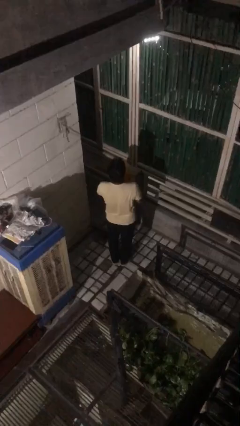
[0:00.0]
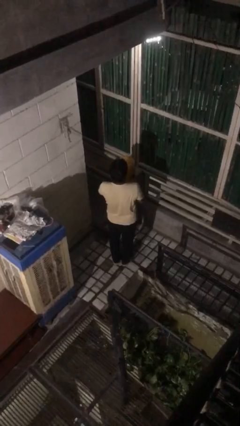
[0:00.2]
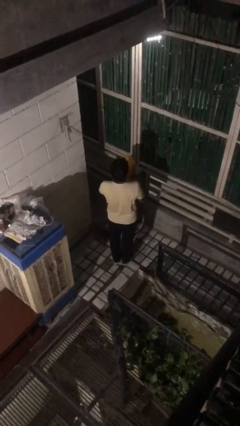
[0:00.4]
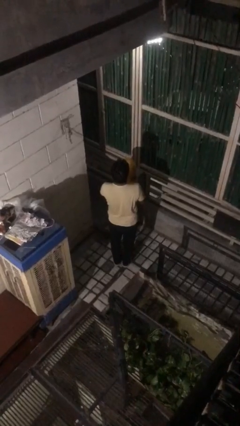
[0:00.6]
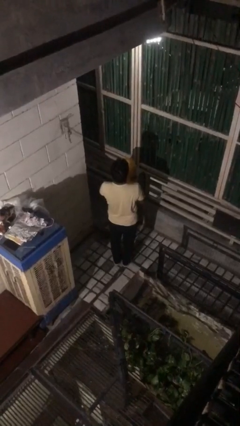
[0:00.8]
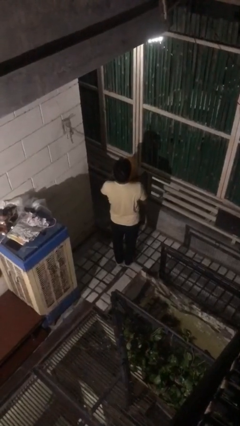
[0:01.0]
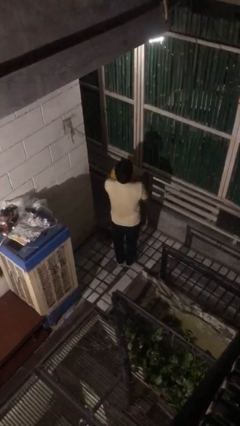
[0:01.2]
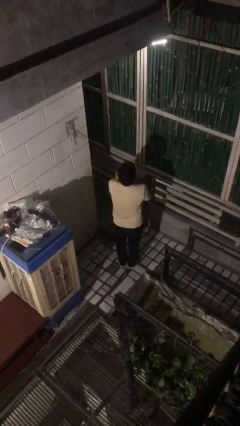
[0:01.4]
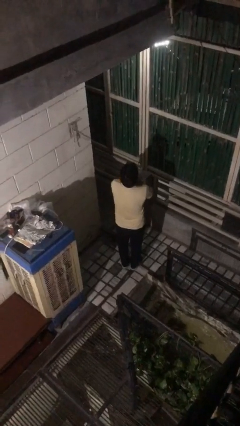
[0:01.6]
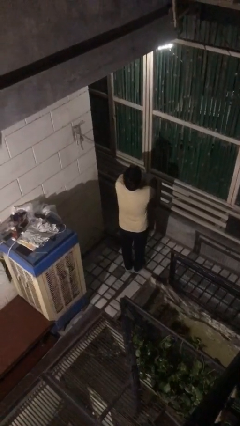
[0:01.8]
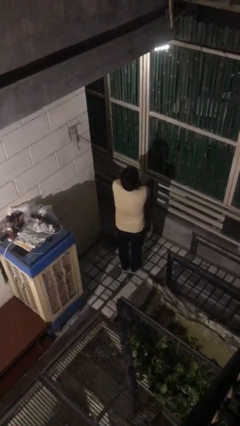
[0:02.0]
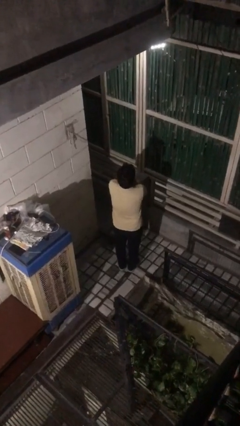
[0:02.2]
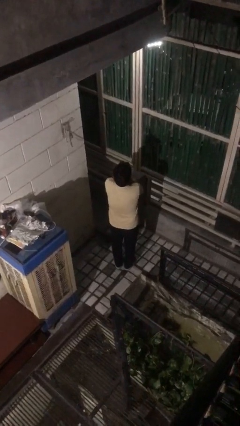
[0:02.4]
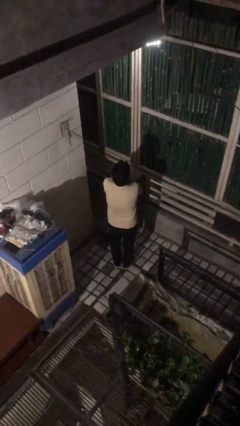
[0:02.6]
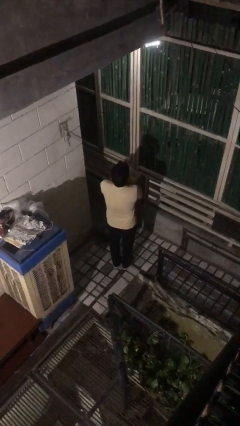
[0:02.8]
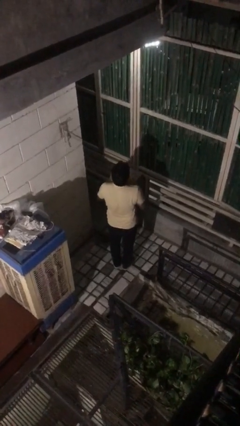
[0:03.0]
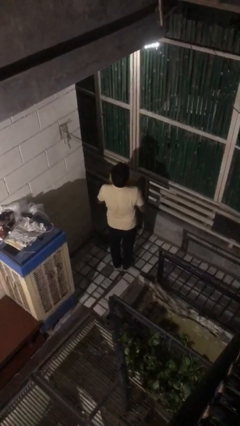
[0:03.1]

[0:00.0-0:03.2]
person hugs stuffed animal

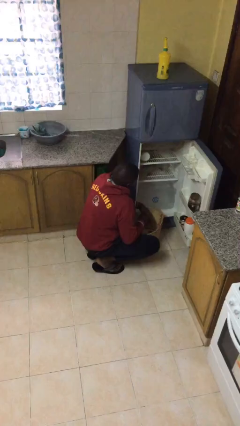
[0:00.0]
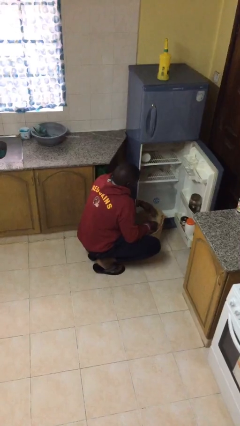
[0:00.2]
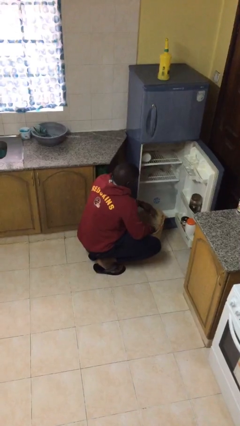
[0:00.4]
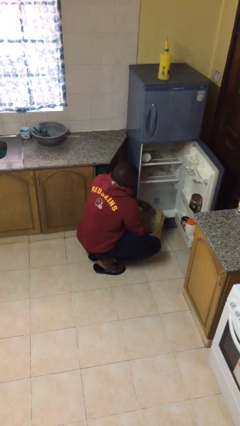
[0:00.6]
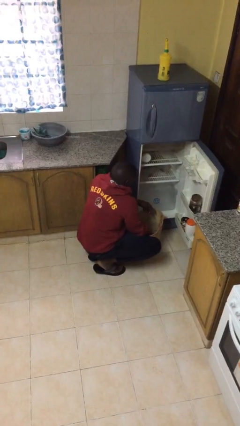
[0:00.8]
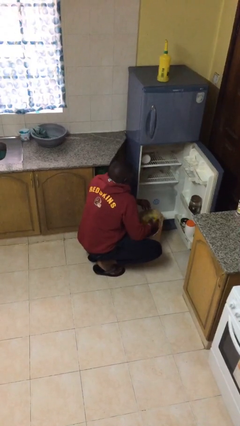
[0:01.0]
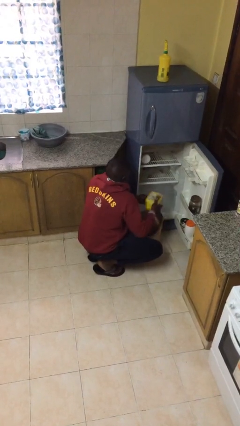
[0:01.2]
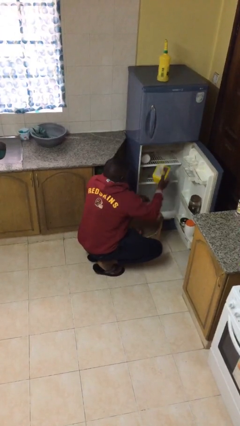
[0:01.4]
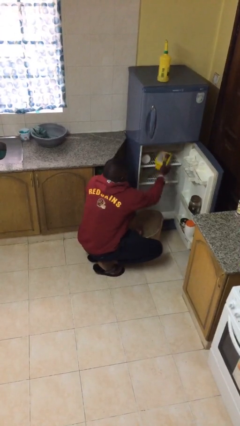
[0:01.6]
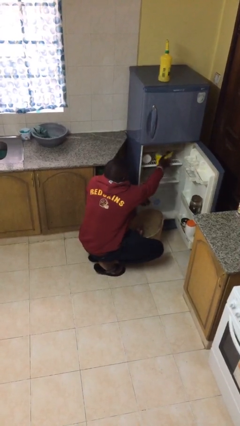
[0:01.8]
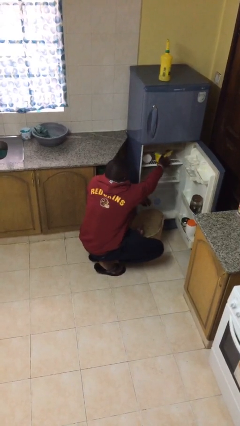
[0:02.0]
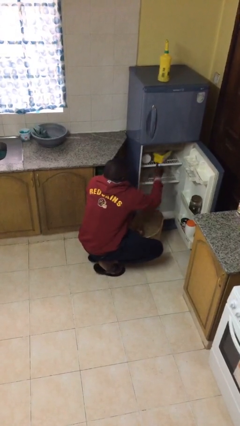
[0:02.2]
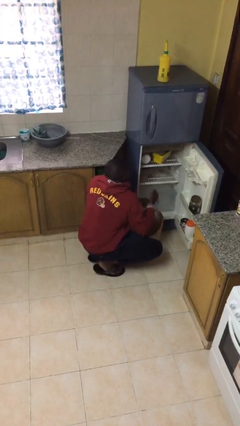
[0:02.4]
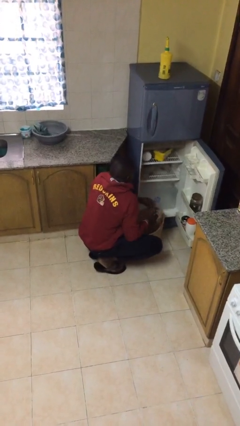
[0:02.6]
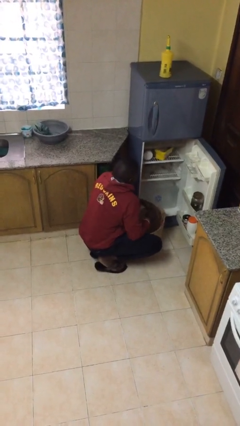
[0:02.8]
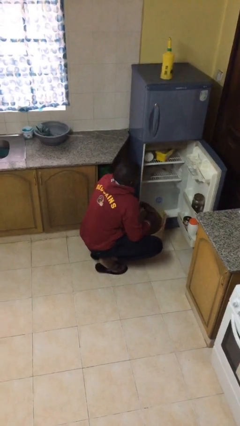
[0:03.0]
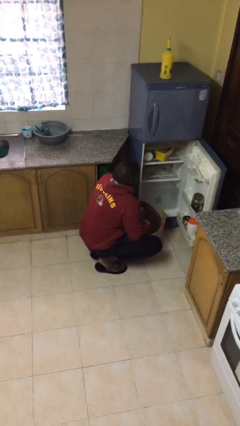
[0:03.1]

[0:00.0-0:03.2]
person loads groceries into refrigerator

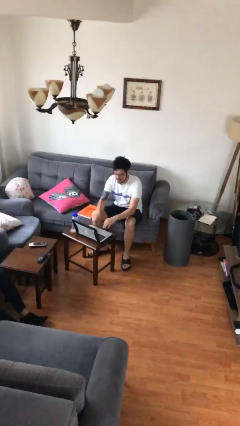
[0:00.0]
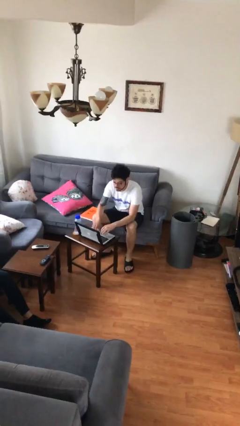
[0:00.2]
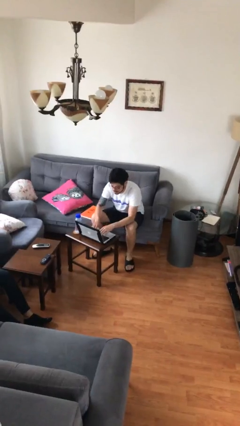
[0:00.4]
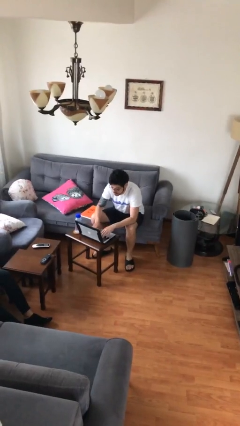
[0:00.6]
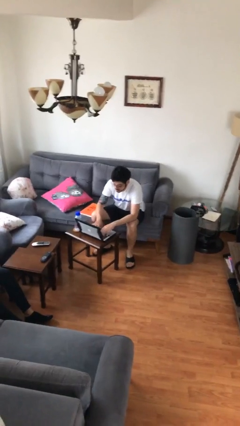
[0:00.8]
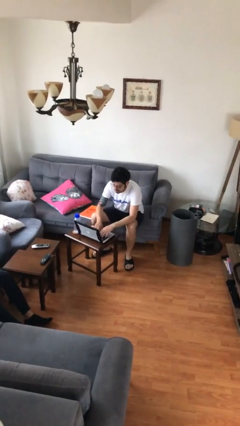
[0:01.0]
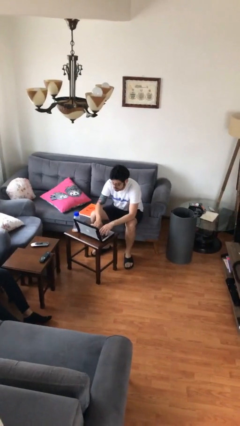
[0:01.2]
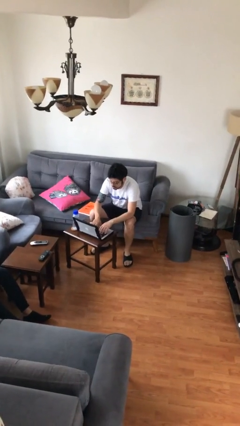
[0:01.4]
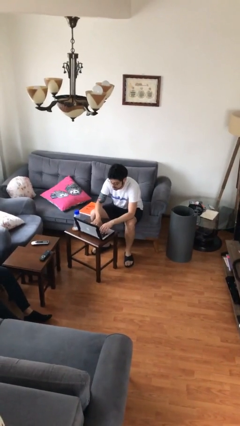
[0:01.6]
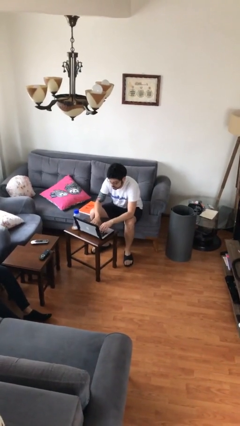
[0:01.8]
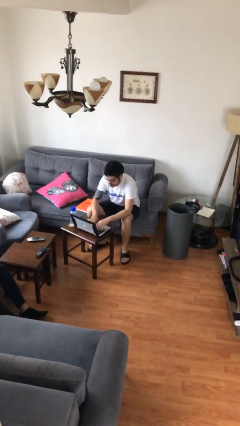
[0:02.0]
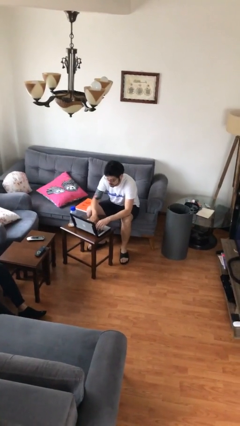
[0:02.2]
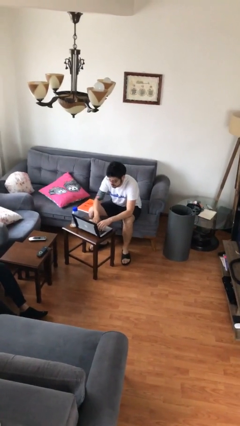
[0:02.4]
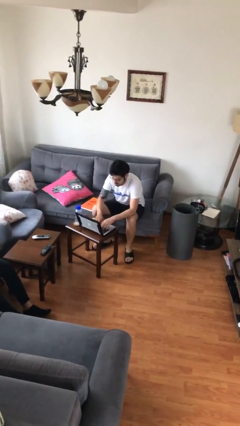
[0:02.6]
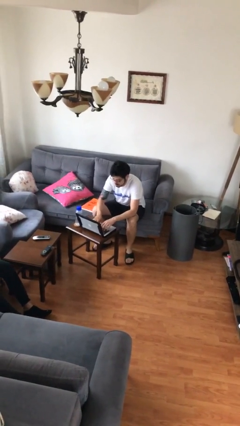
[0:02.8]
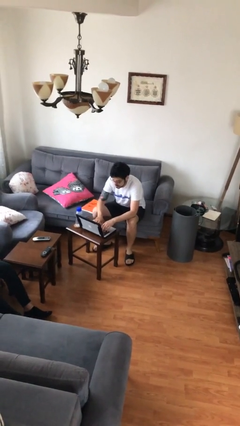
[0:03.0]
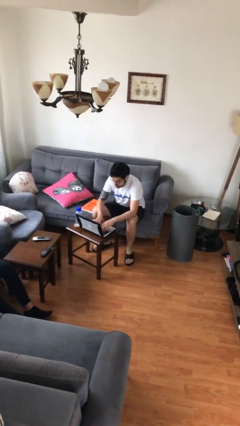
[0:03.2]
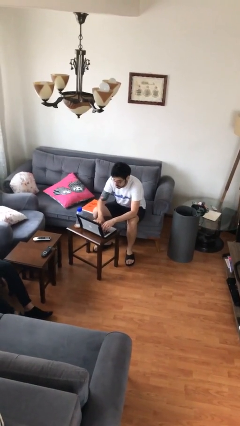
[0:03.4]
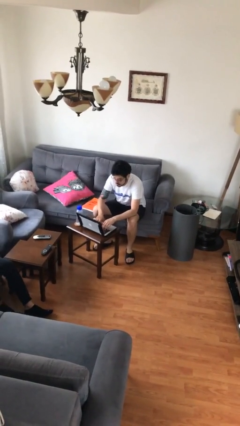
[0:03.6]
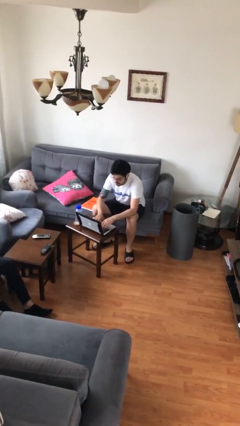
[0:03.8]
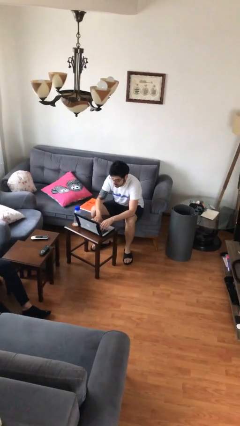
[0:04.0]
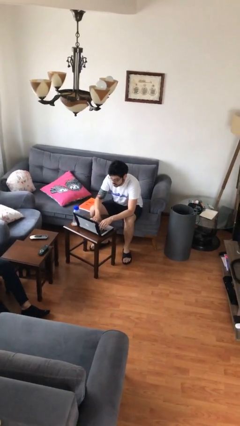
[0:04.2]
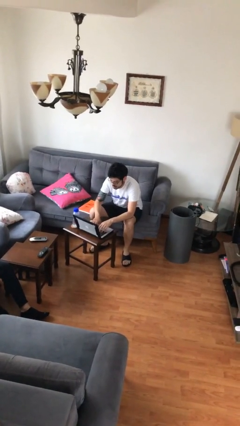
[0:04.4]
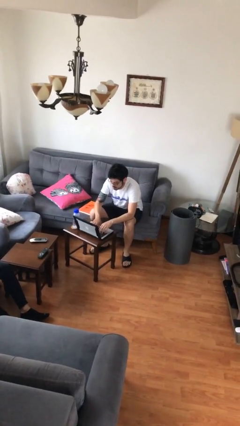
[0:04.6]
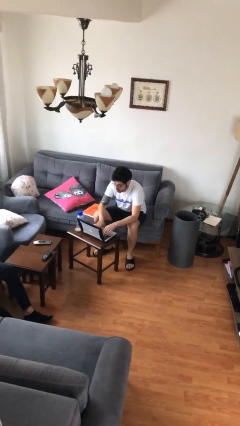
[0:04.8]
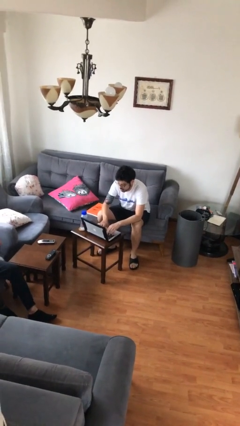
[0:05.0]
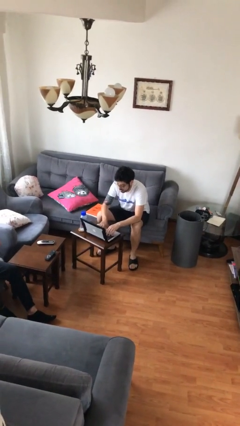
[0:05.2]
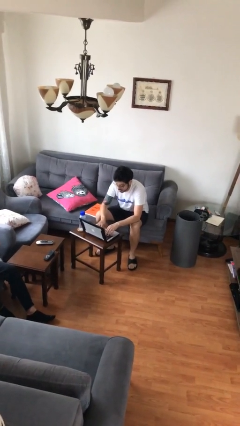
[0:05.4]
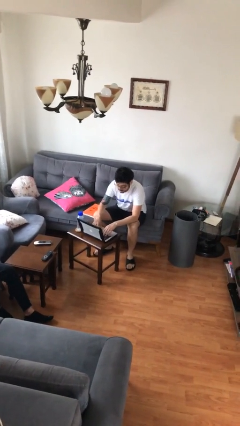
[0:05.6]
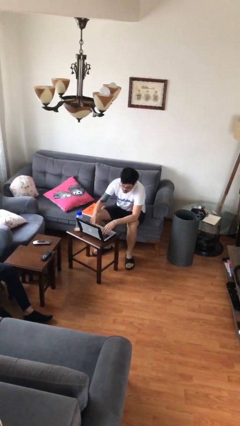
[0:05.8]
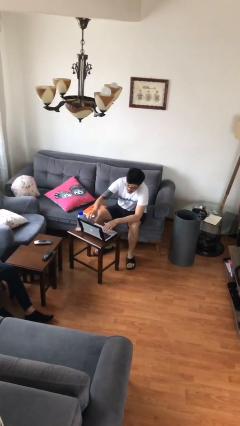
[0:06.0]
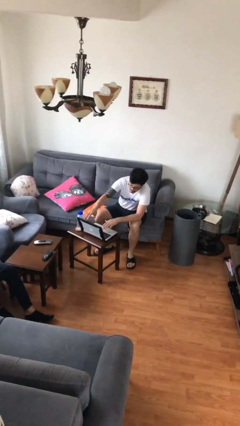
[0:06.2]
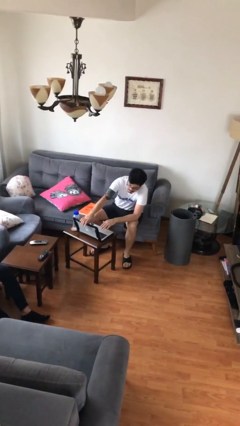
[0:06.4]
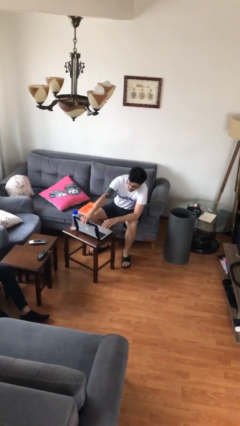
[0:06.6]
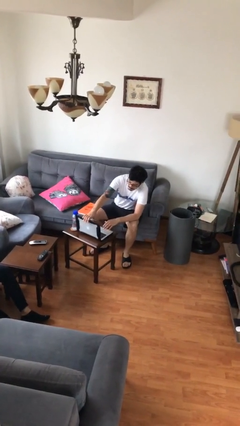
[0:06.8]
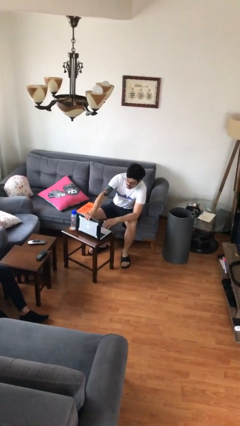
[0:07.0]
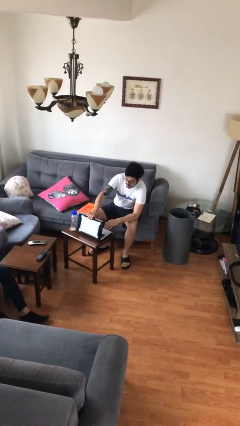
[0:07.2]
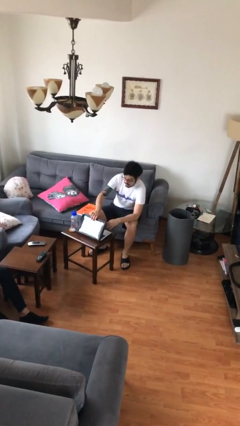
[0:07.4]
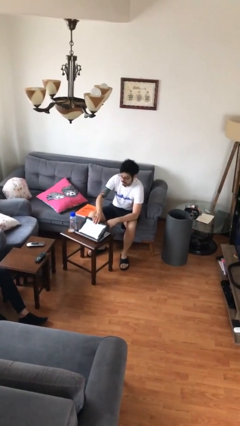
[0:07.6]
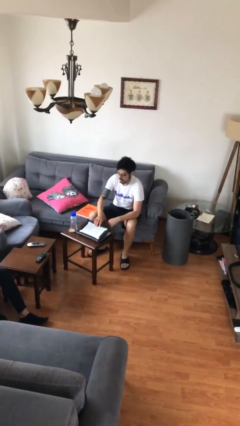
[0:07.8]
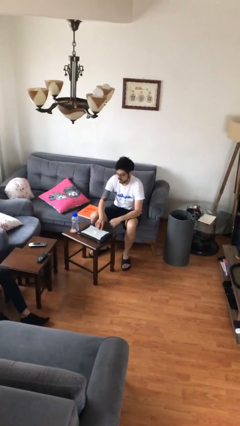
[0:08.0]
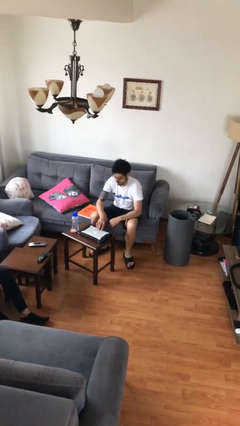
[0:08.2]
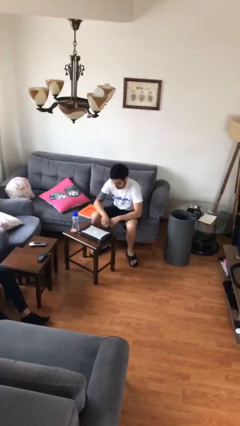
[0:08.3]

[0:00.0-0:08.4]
person interacts with laptop

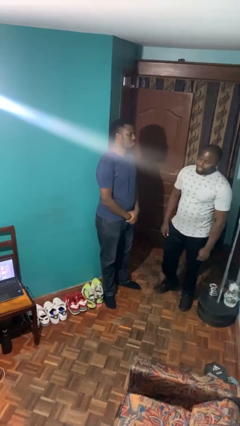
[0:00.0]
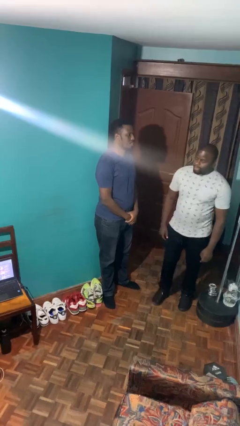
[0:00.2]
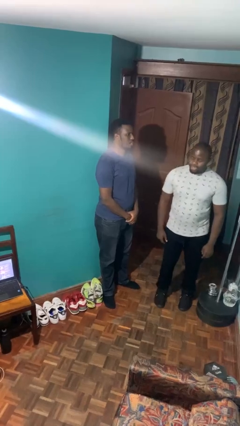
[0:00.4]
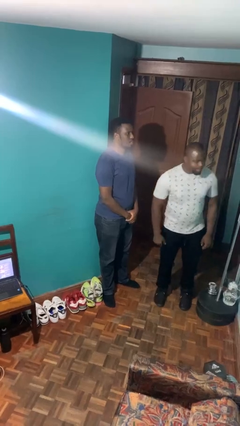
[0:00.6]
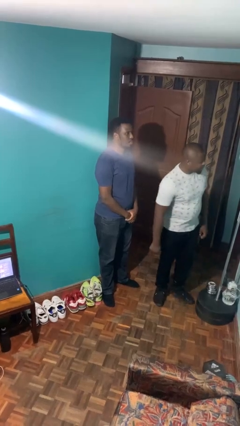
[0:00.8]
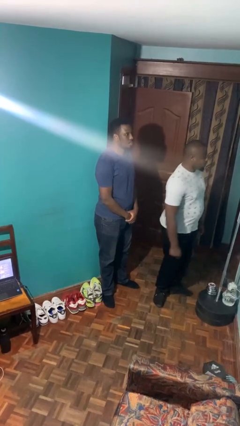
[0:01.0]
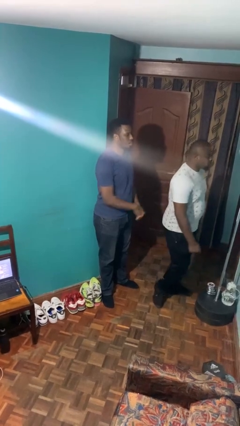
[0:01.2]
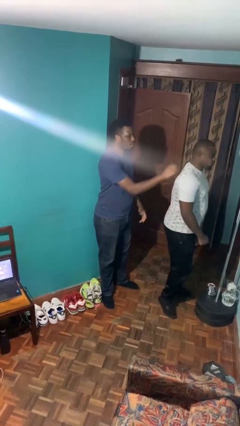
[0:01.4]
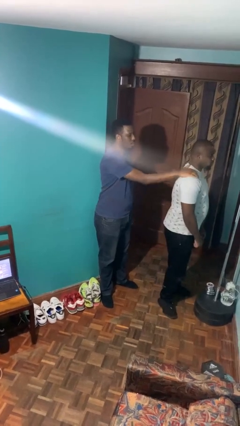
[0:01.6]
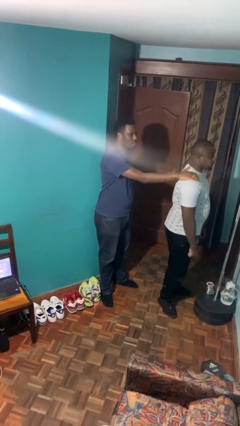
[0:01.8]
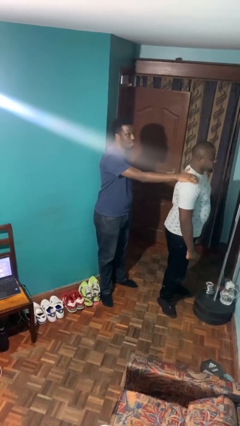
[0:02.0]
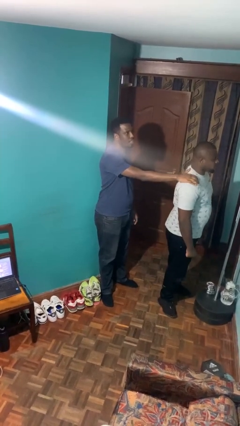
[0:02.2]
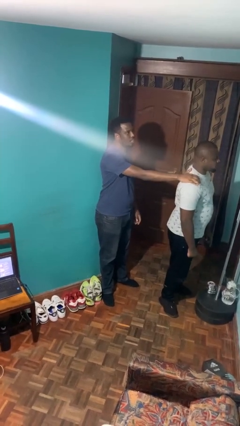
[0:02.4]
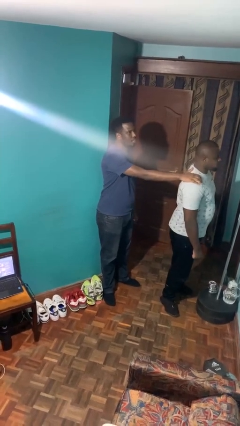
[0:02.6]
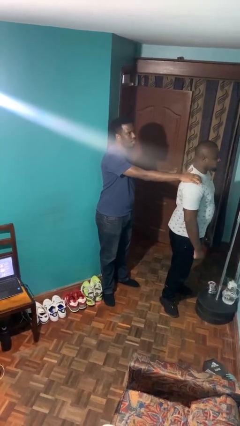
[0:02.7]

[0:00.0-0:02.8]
person grabs person by shoulder

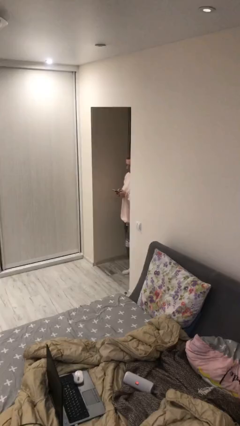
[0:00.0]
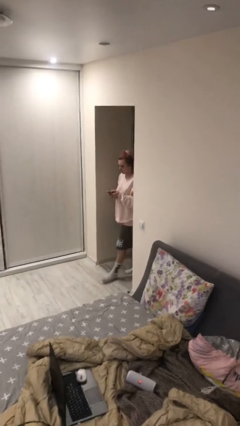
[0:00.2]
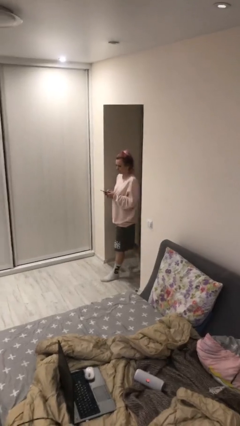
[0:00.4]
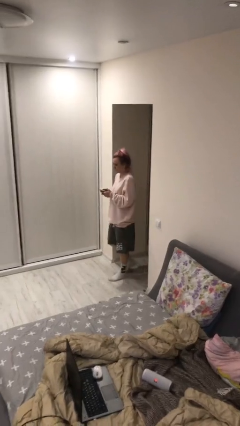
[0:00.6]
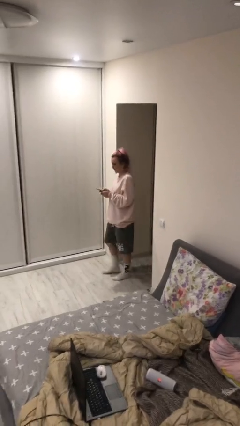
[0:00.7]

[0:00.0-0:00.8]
person enters scene through structure
